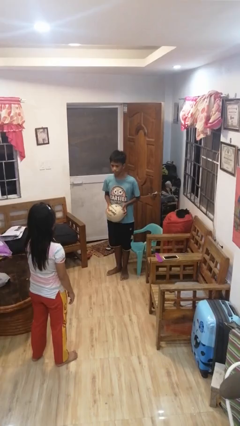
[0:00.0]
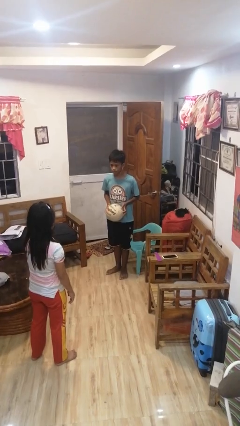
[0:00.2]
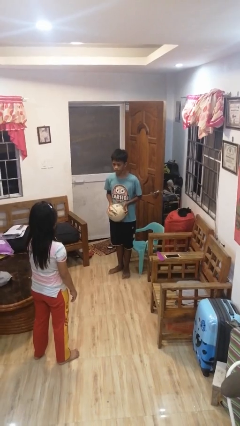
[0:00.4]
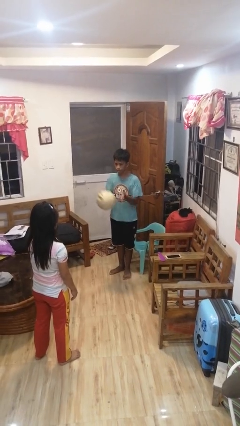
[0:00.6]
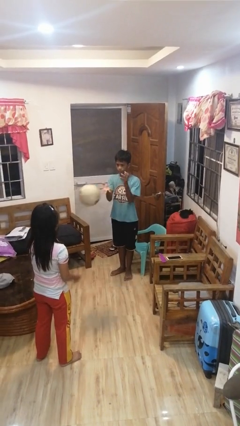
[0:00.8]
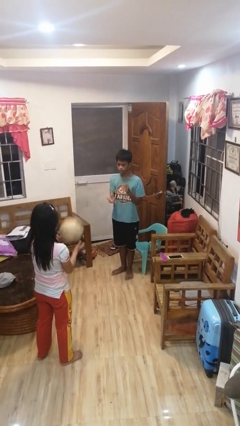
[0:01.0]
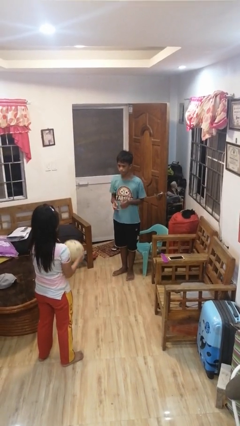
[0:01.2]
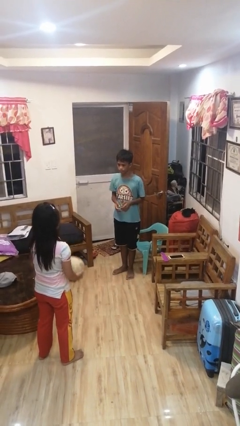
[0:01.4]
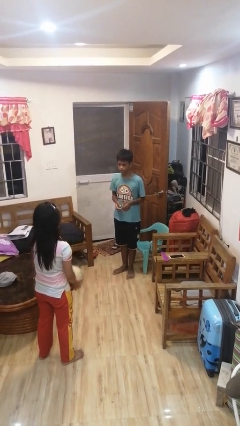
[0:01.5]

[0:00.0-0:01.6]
person throws object to person

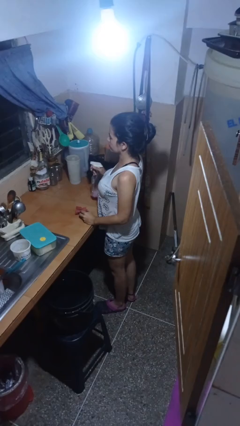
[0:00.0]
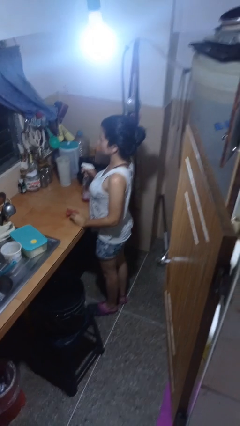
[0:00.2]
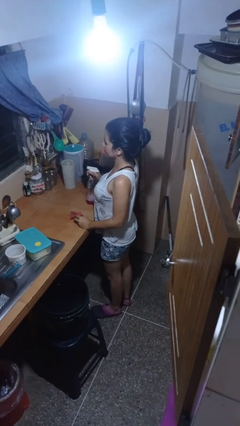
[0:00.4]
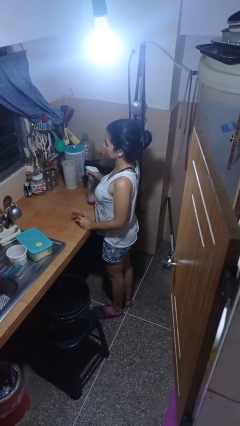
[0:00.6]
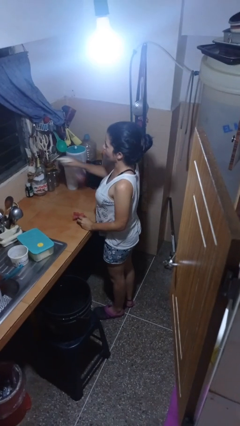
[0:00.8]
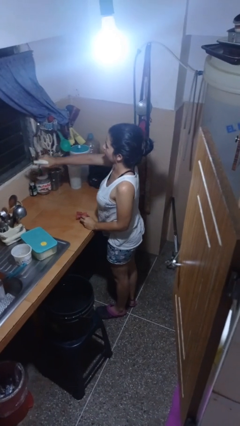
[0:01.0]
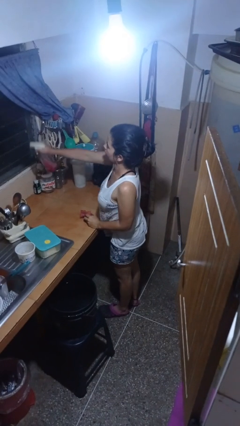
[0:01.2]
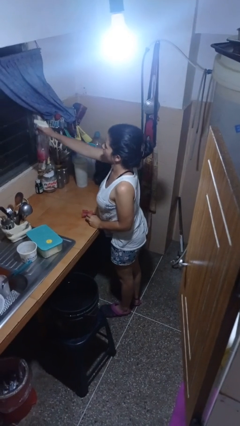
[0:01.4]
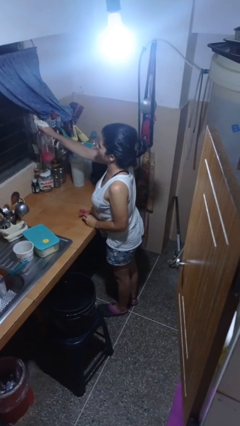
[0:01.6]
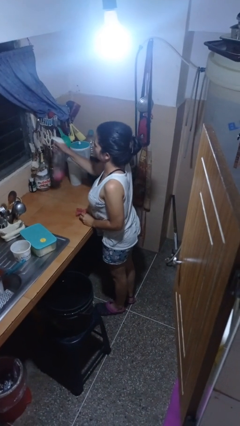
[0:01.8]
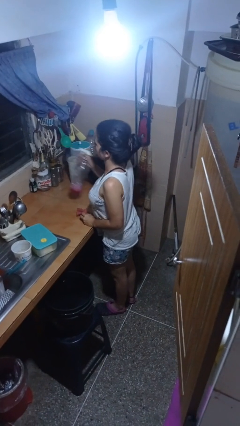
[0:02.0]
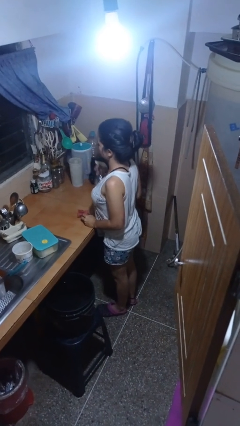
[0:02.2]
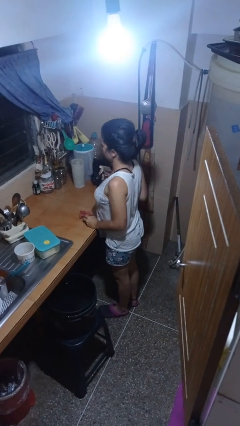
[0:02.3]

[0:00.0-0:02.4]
person sprays from bottle

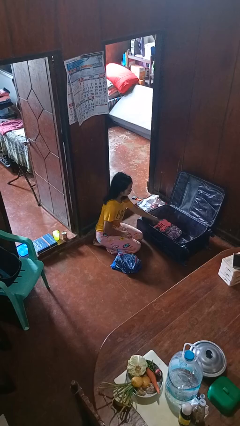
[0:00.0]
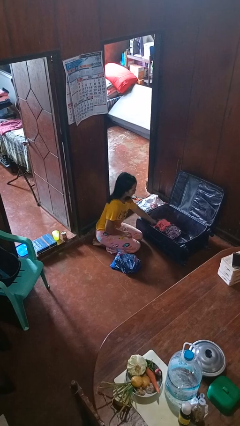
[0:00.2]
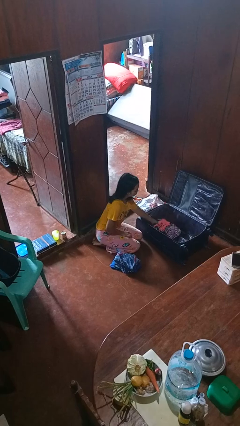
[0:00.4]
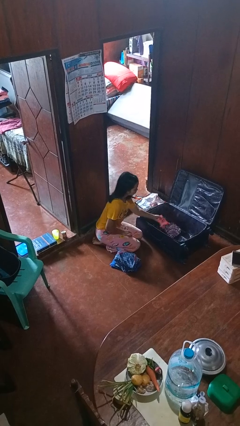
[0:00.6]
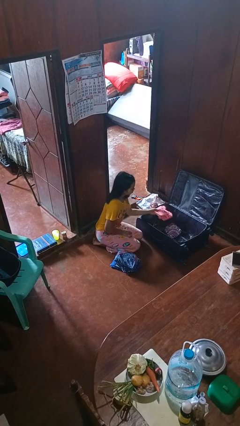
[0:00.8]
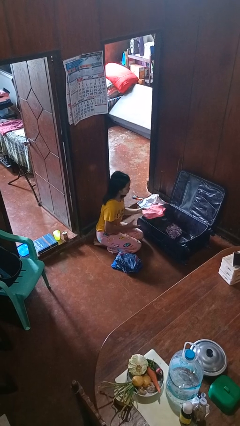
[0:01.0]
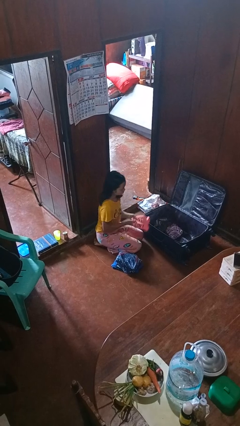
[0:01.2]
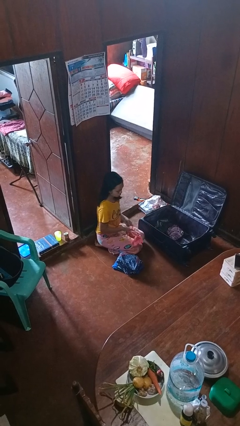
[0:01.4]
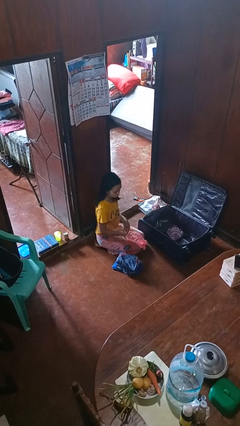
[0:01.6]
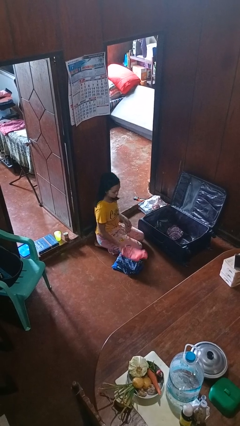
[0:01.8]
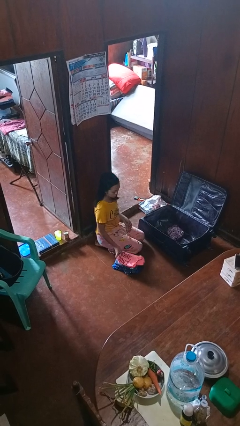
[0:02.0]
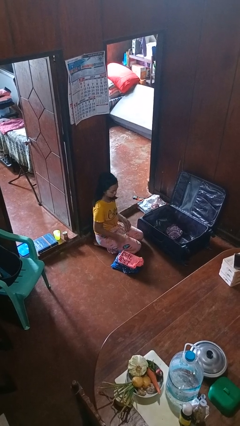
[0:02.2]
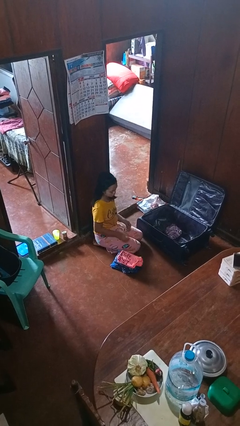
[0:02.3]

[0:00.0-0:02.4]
person unloads clothes from suitcase

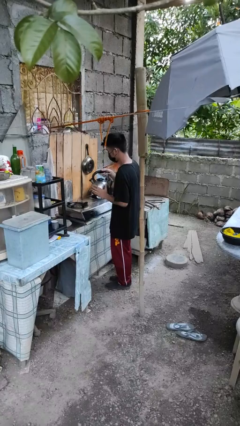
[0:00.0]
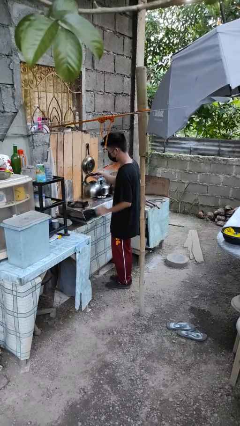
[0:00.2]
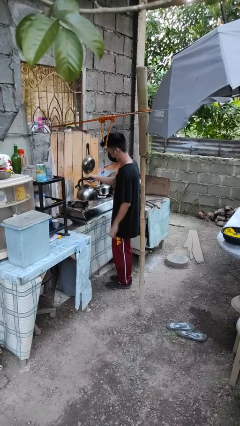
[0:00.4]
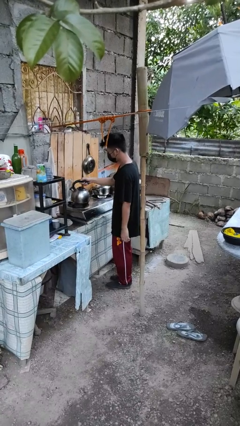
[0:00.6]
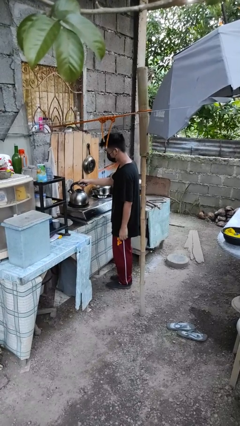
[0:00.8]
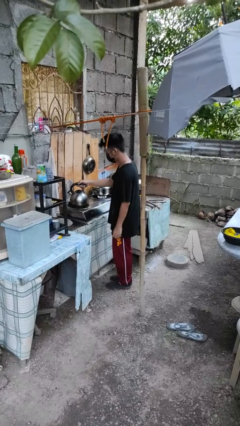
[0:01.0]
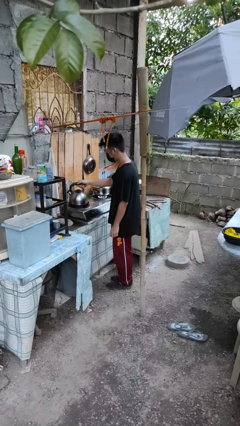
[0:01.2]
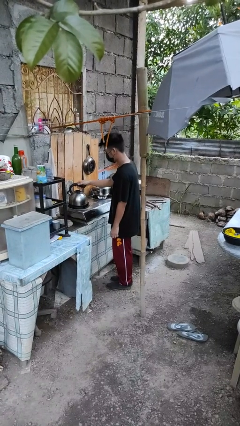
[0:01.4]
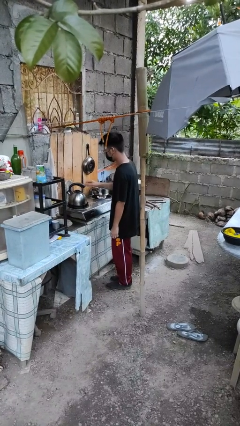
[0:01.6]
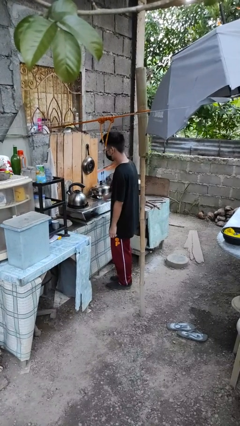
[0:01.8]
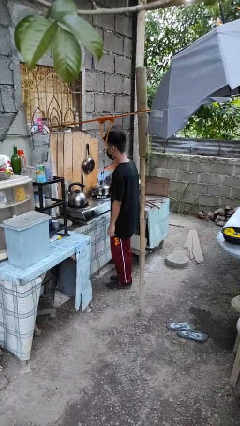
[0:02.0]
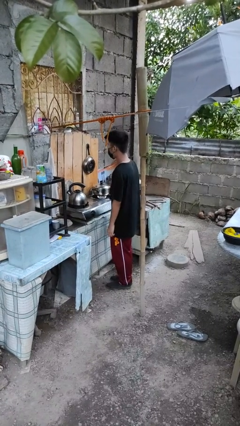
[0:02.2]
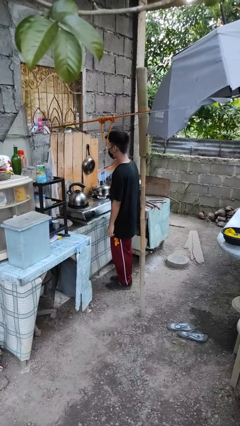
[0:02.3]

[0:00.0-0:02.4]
person puts down object on countertop

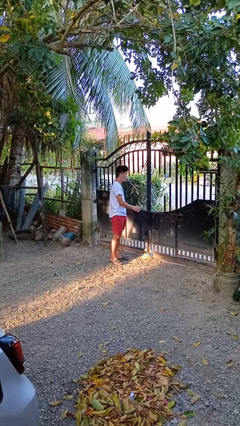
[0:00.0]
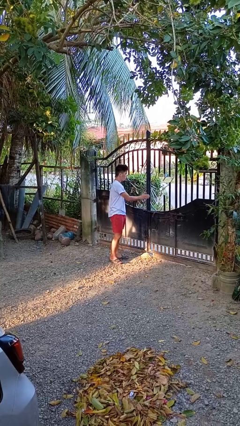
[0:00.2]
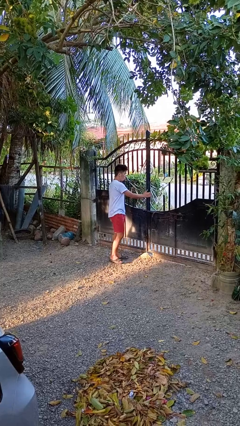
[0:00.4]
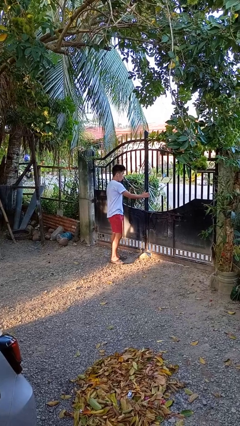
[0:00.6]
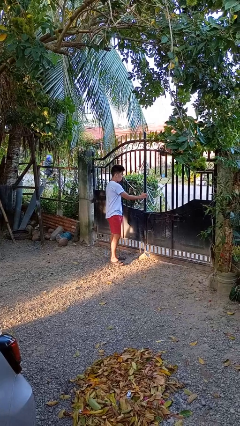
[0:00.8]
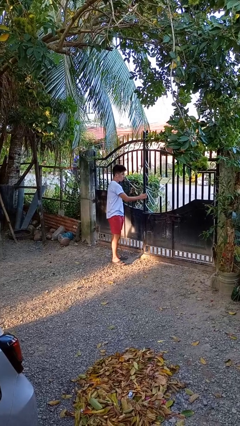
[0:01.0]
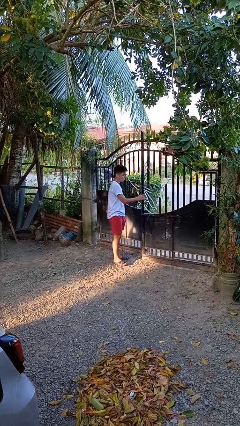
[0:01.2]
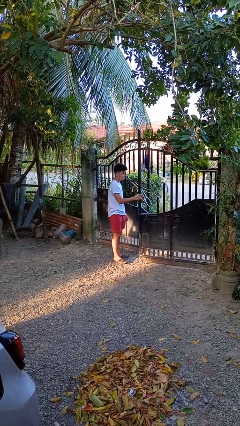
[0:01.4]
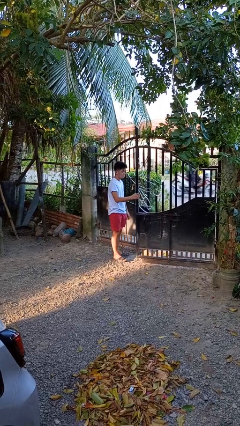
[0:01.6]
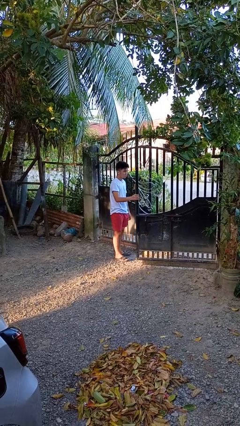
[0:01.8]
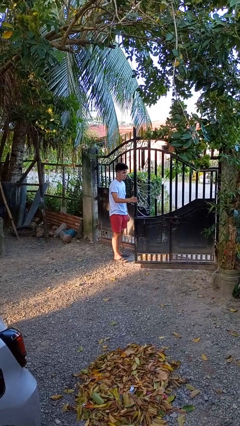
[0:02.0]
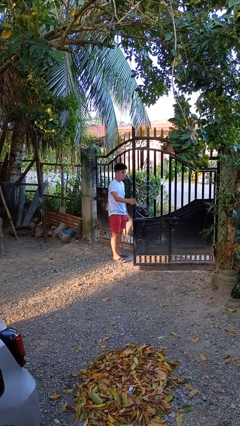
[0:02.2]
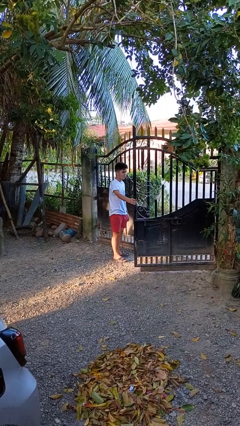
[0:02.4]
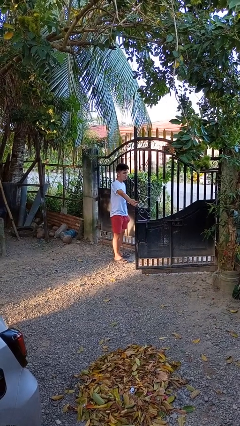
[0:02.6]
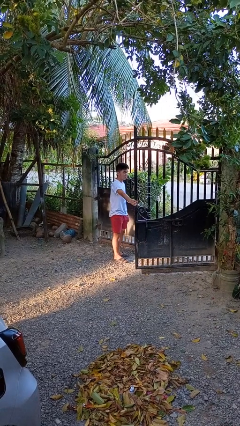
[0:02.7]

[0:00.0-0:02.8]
person opens gate

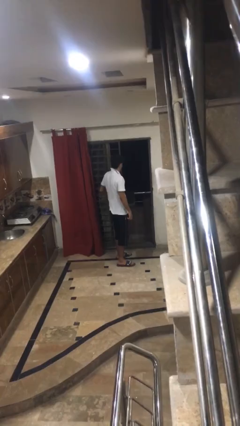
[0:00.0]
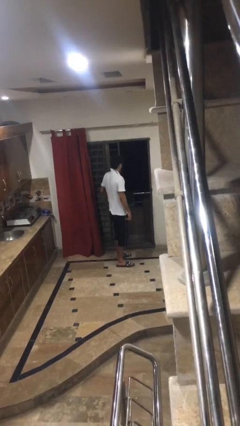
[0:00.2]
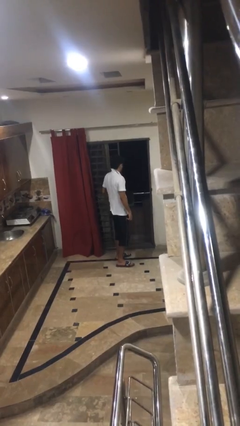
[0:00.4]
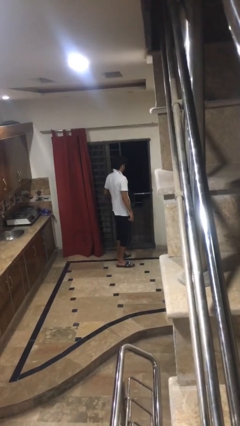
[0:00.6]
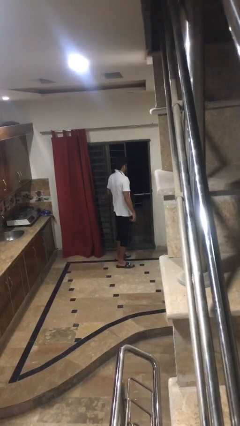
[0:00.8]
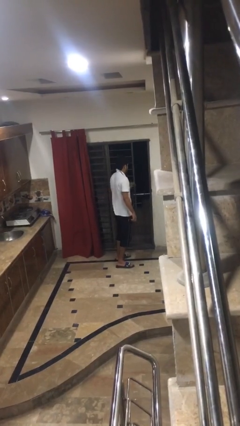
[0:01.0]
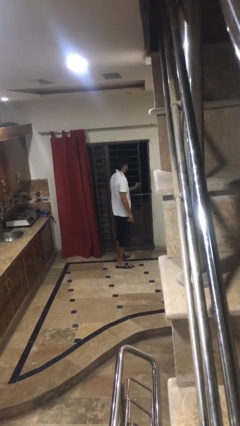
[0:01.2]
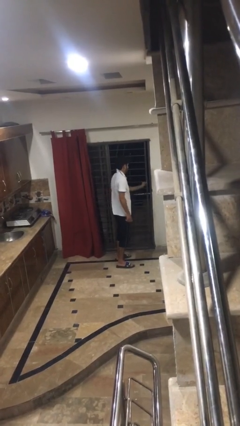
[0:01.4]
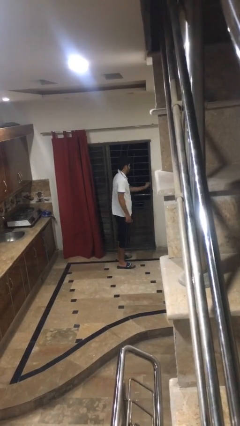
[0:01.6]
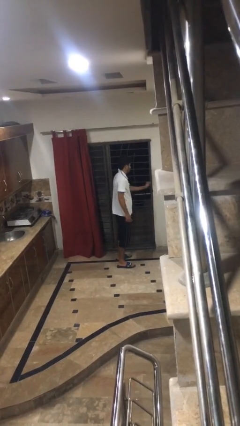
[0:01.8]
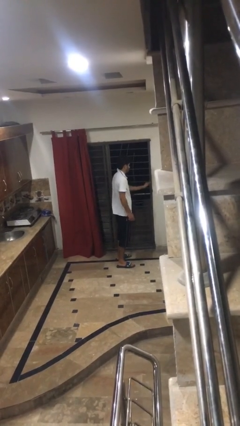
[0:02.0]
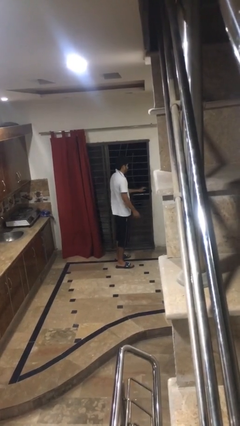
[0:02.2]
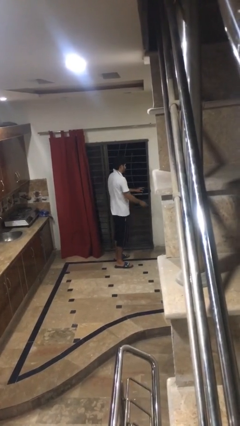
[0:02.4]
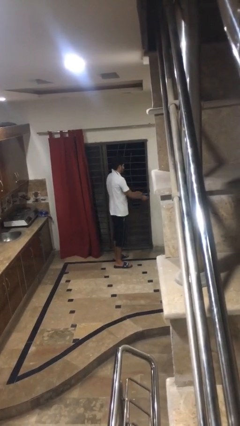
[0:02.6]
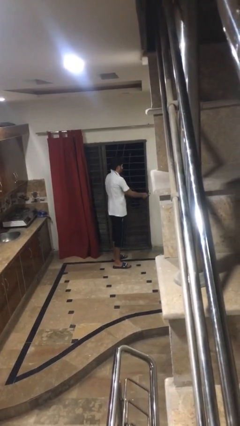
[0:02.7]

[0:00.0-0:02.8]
person closes facility door

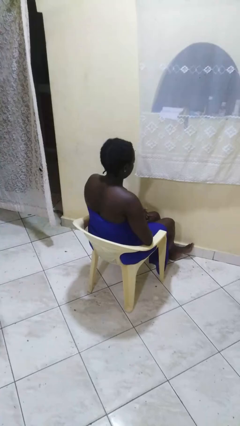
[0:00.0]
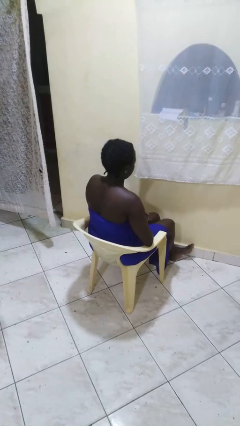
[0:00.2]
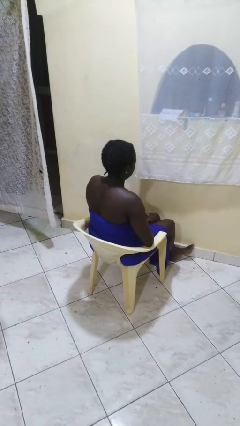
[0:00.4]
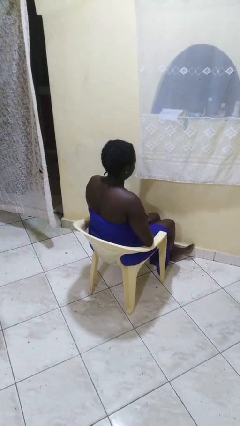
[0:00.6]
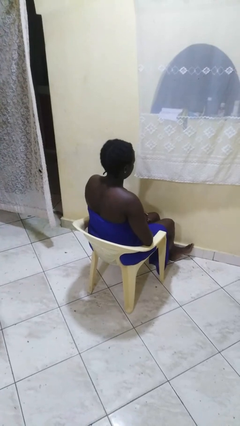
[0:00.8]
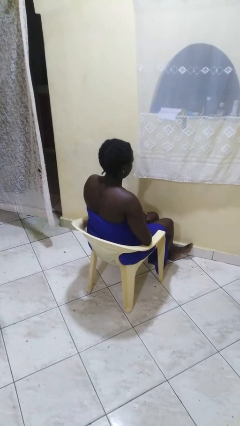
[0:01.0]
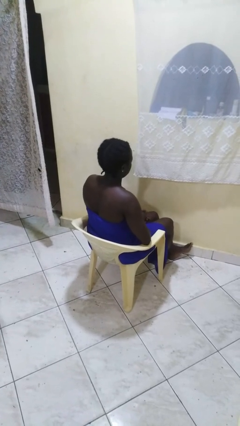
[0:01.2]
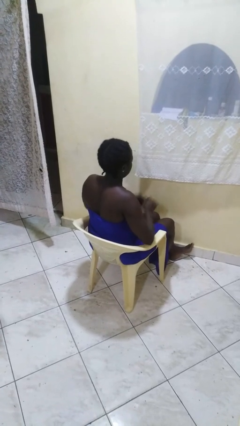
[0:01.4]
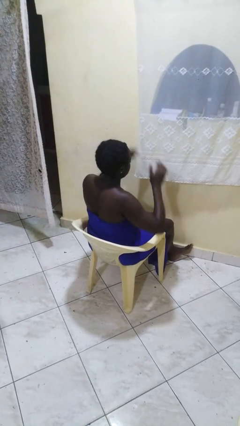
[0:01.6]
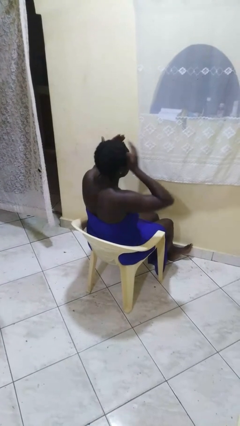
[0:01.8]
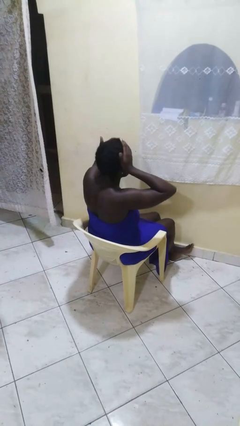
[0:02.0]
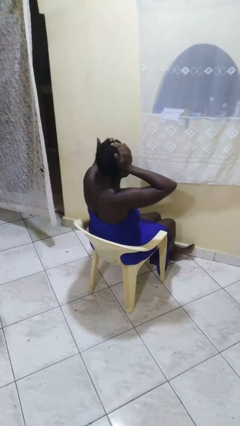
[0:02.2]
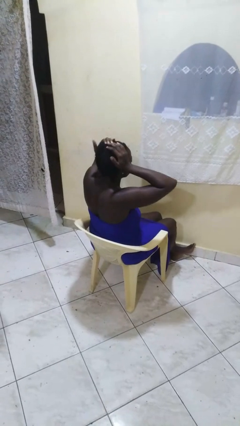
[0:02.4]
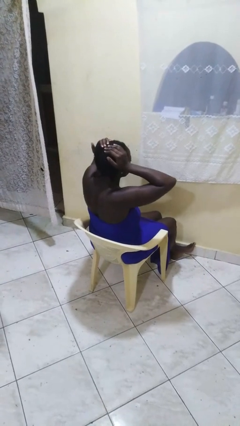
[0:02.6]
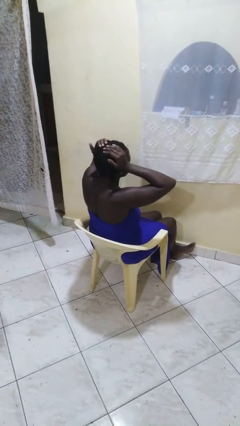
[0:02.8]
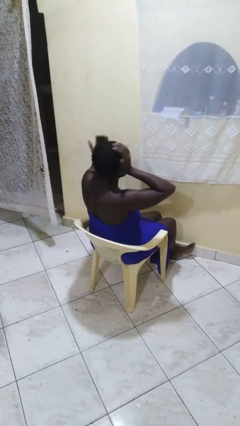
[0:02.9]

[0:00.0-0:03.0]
person strokes hair
